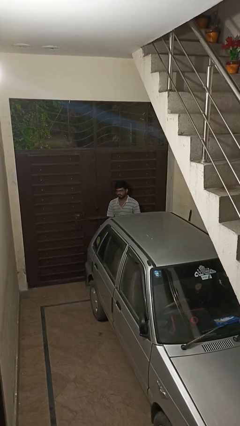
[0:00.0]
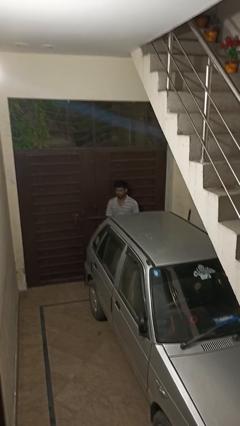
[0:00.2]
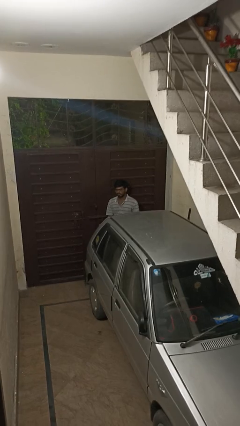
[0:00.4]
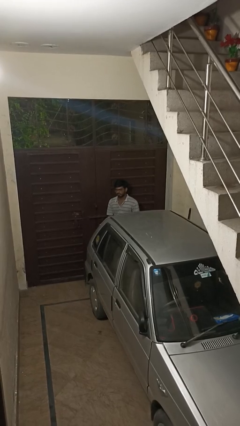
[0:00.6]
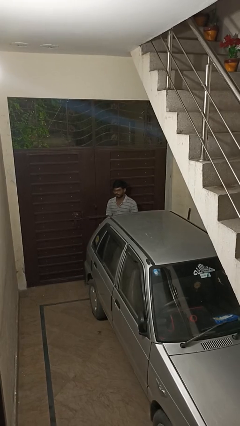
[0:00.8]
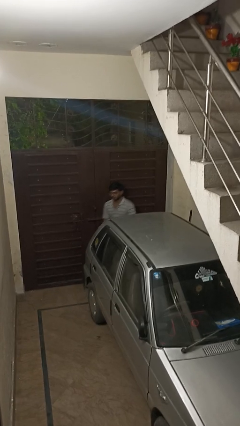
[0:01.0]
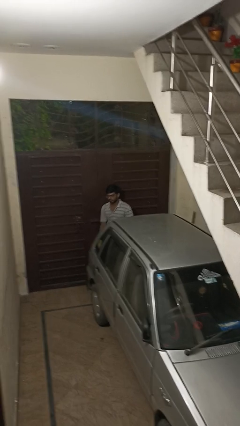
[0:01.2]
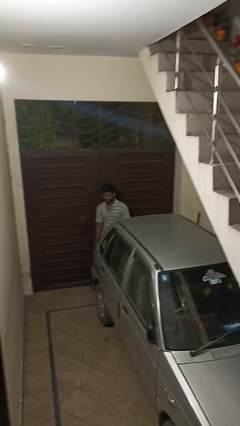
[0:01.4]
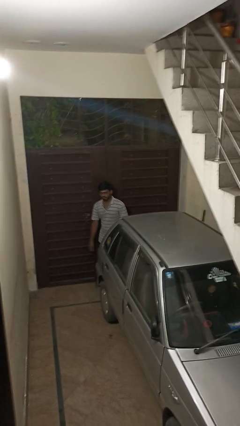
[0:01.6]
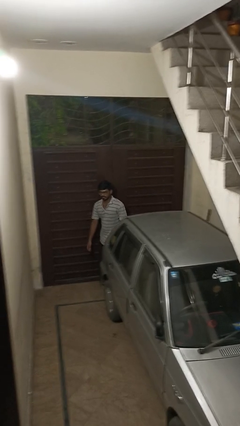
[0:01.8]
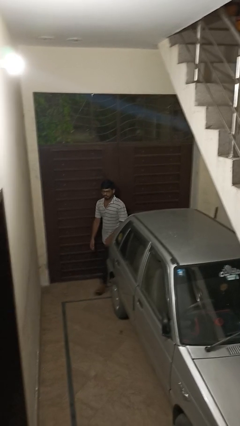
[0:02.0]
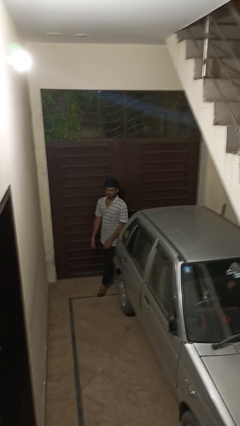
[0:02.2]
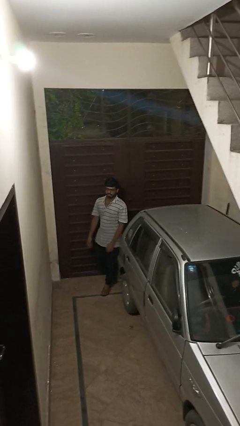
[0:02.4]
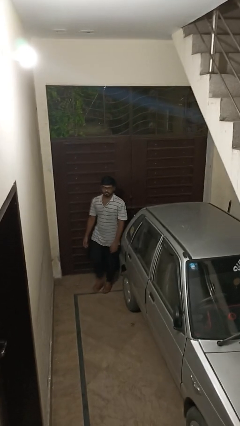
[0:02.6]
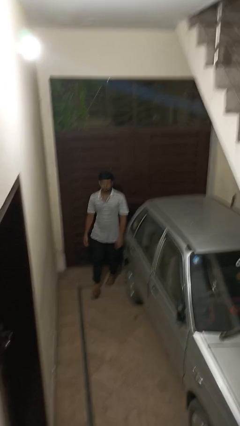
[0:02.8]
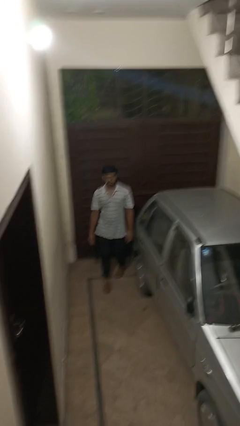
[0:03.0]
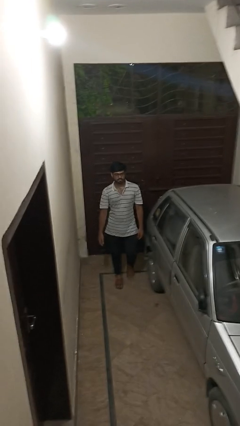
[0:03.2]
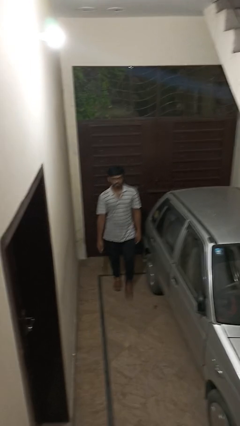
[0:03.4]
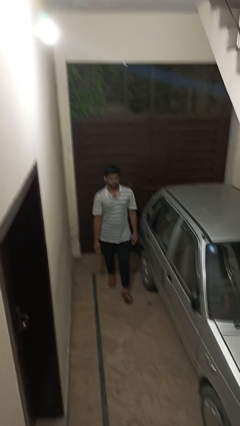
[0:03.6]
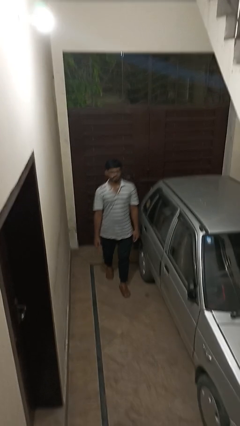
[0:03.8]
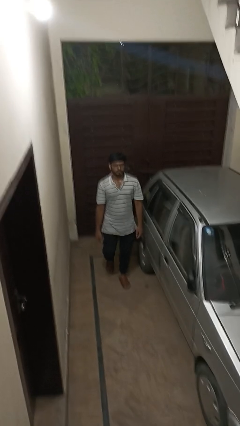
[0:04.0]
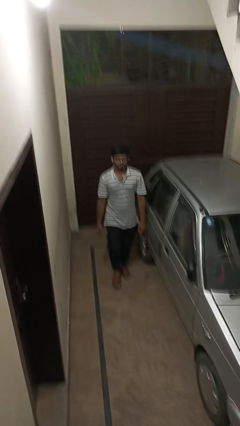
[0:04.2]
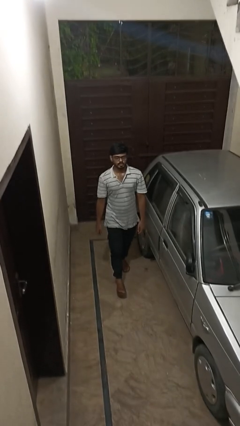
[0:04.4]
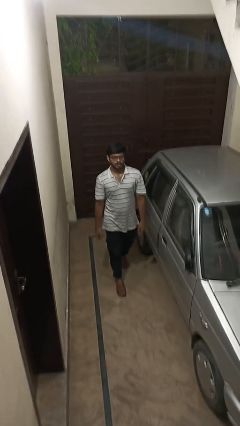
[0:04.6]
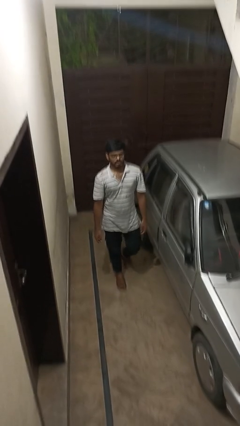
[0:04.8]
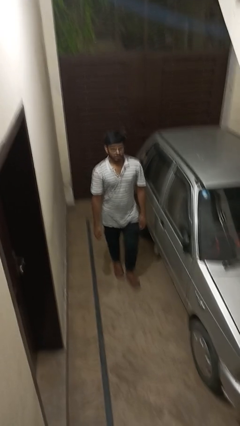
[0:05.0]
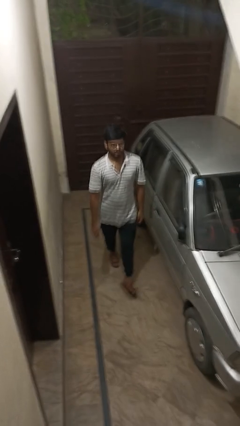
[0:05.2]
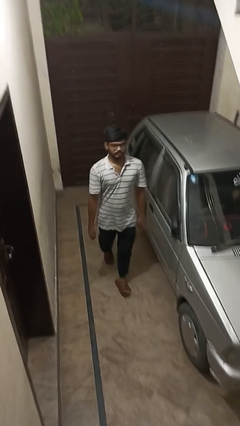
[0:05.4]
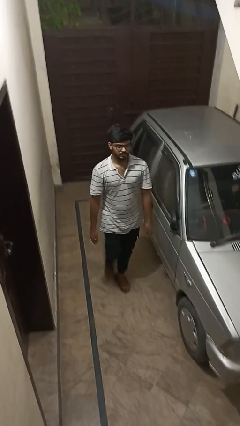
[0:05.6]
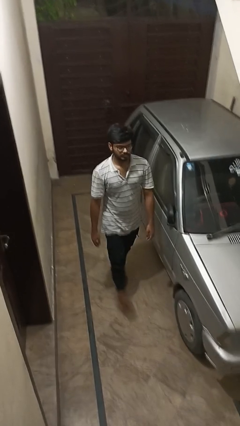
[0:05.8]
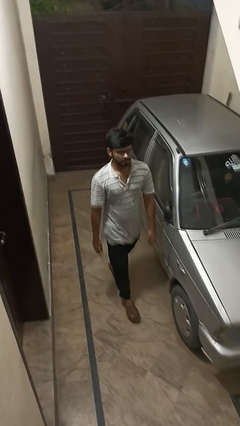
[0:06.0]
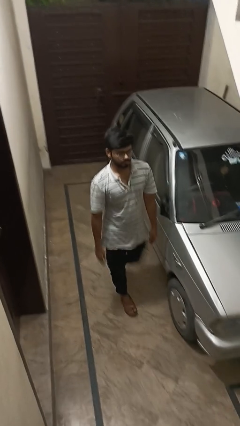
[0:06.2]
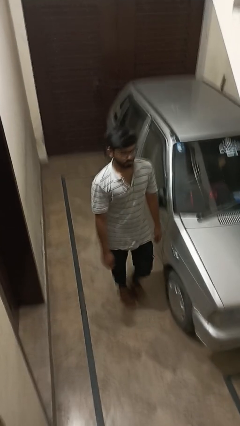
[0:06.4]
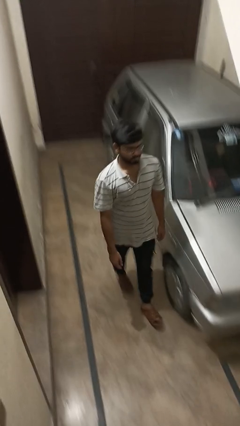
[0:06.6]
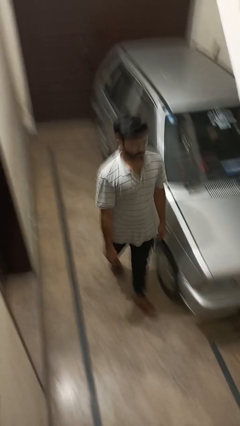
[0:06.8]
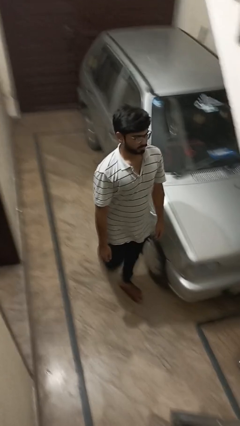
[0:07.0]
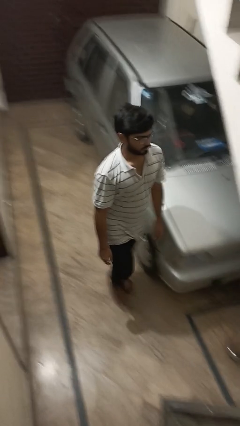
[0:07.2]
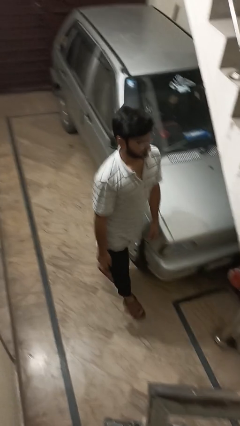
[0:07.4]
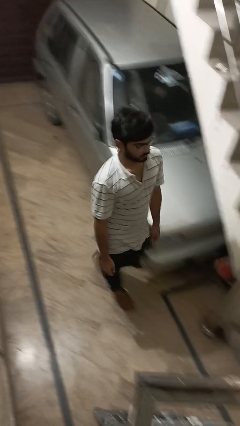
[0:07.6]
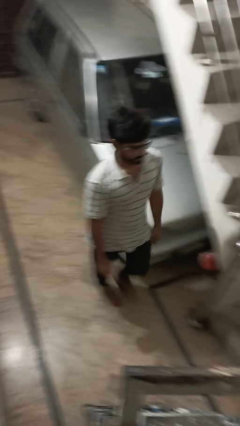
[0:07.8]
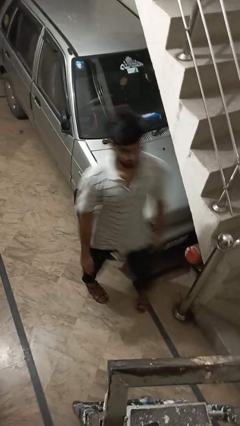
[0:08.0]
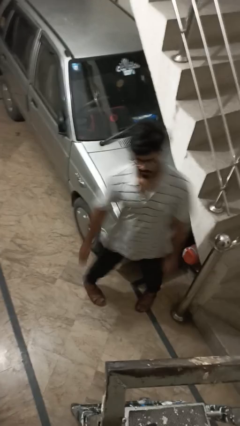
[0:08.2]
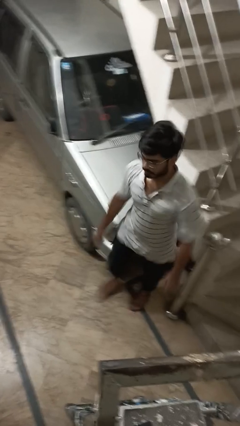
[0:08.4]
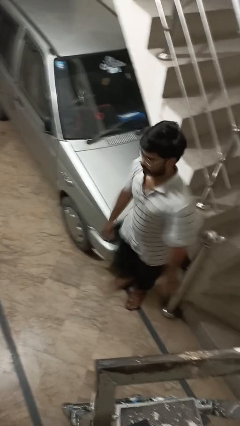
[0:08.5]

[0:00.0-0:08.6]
person walks around car

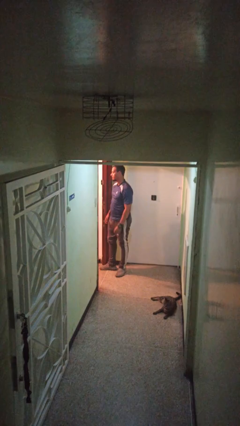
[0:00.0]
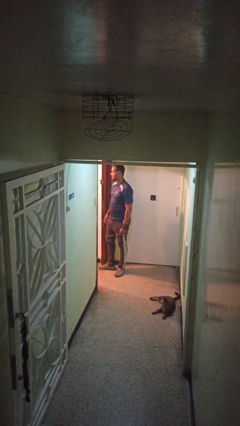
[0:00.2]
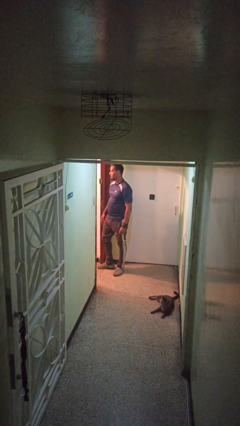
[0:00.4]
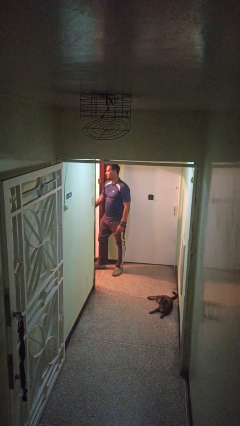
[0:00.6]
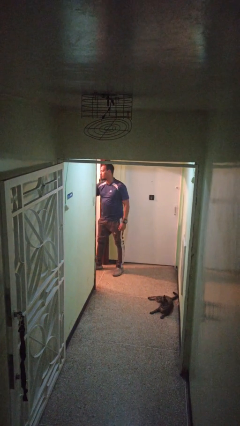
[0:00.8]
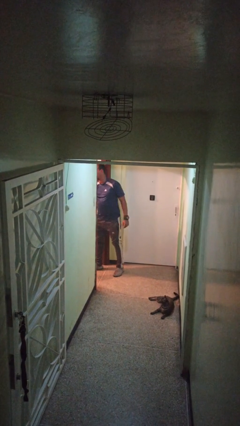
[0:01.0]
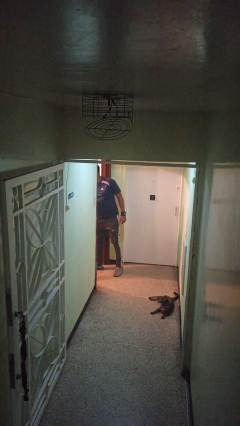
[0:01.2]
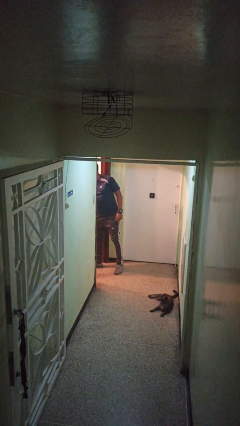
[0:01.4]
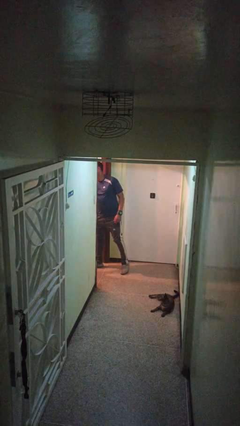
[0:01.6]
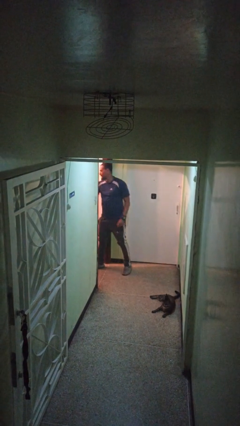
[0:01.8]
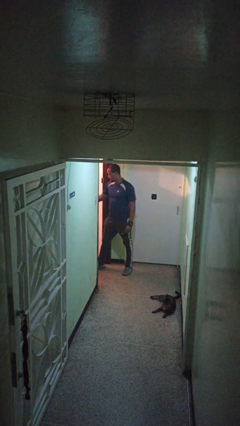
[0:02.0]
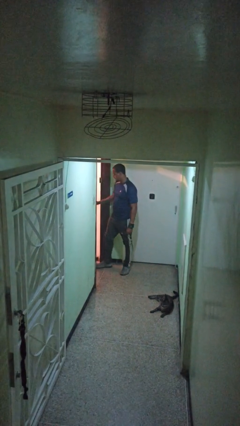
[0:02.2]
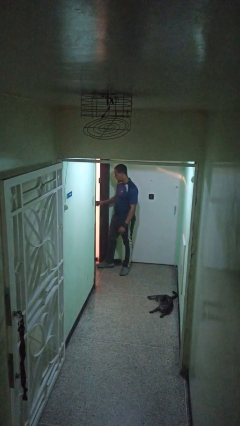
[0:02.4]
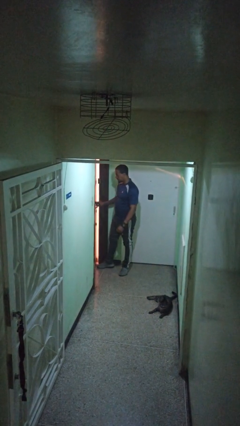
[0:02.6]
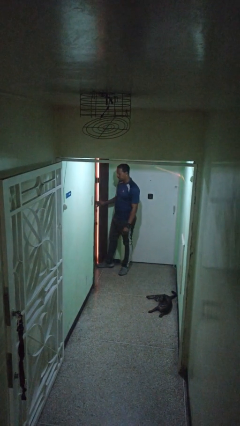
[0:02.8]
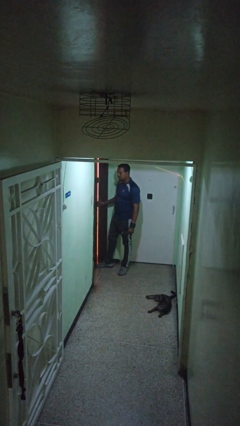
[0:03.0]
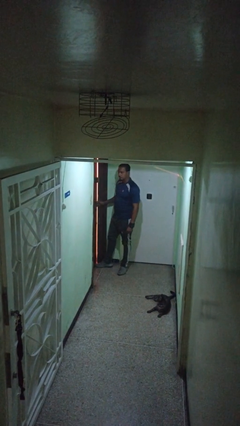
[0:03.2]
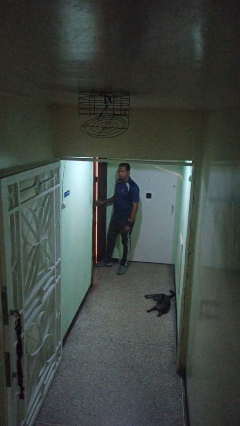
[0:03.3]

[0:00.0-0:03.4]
person closes facility door

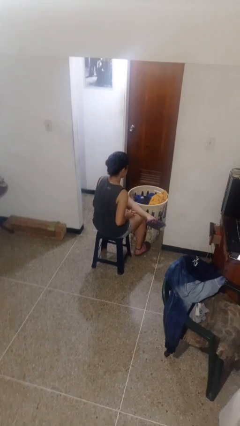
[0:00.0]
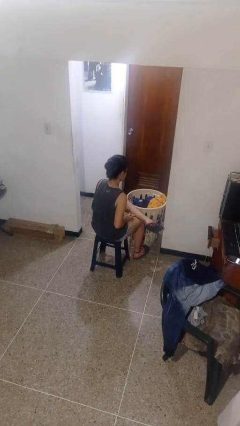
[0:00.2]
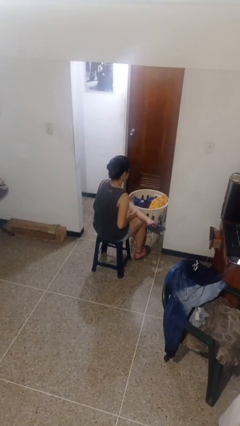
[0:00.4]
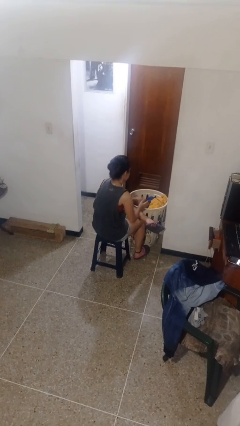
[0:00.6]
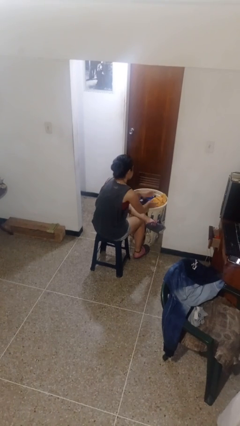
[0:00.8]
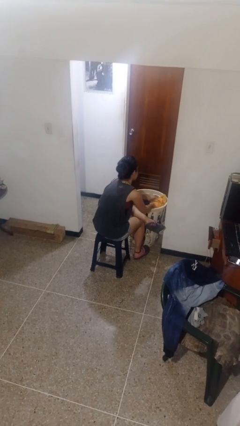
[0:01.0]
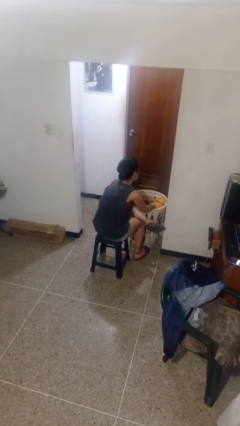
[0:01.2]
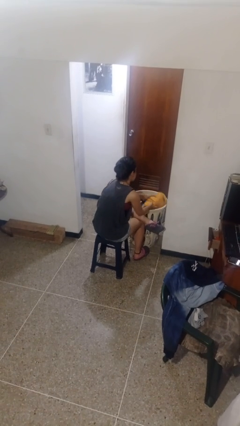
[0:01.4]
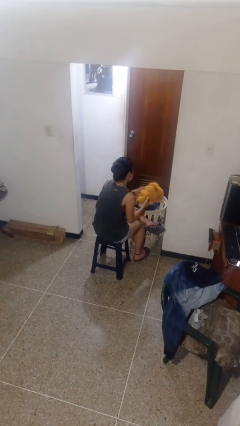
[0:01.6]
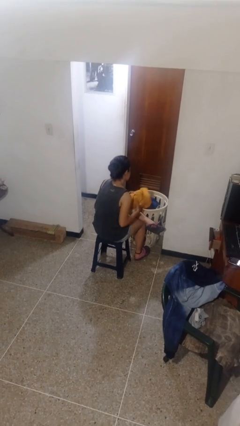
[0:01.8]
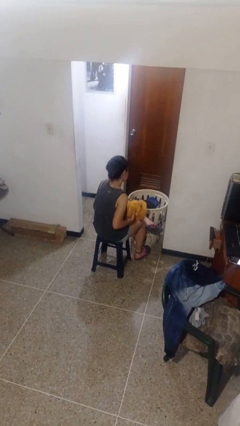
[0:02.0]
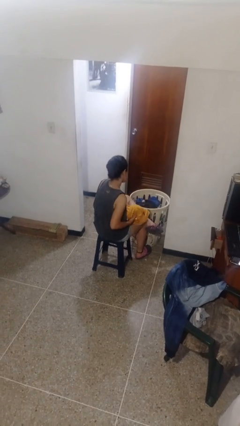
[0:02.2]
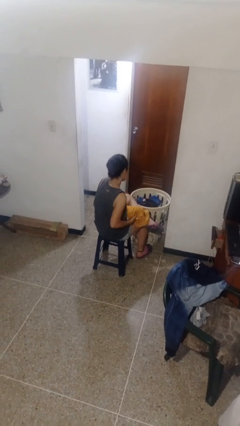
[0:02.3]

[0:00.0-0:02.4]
person takes object from basket

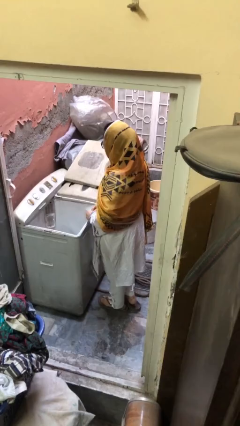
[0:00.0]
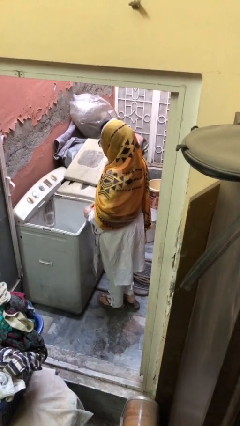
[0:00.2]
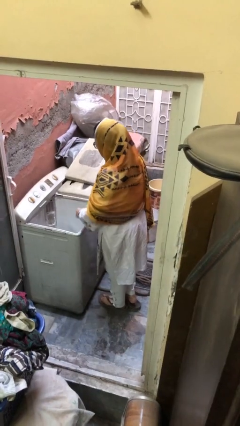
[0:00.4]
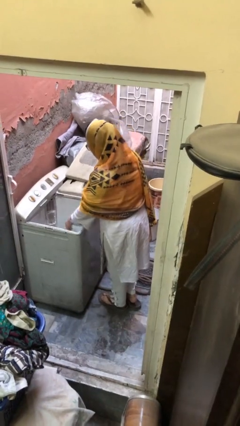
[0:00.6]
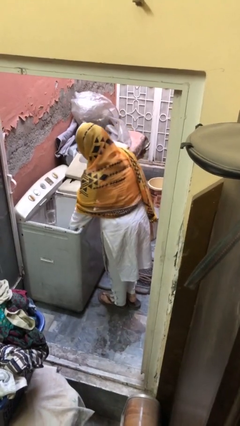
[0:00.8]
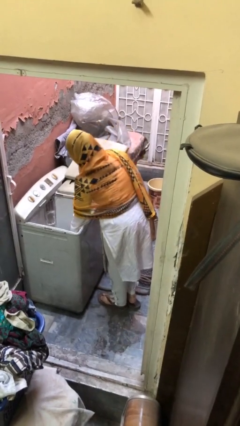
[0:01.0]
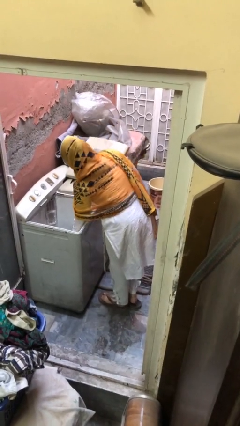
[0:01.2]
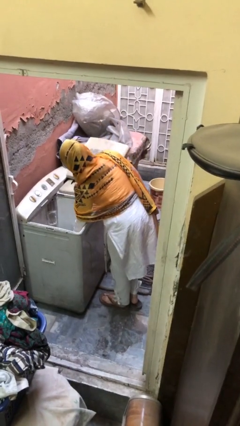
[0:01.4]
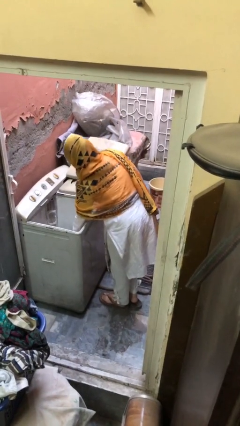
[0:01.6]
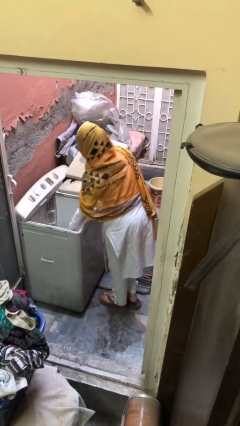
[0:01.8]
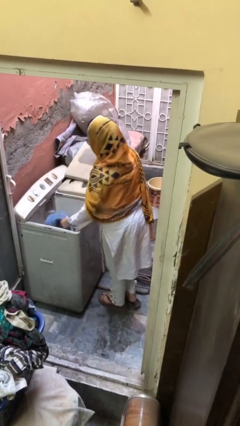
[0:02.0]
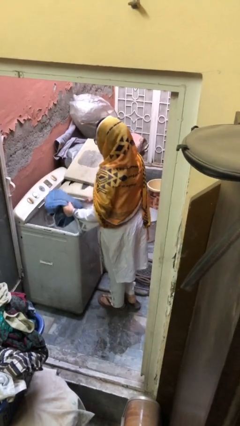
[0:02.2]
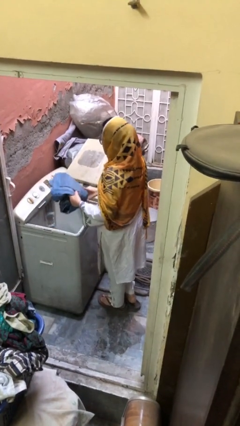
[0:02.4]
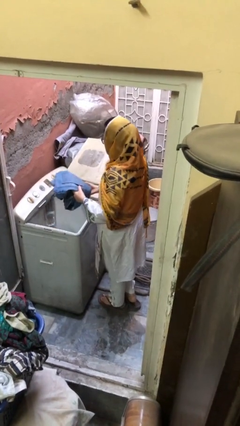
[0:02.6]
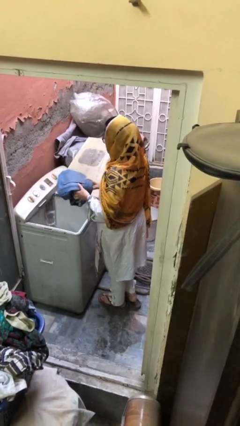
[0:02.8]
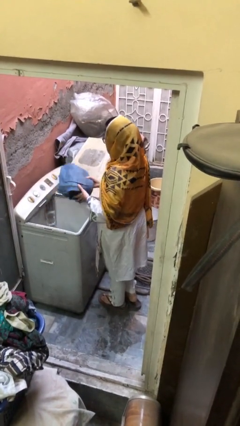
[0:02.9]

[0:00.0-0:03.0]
person unloads clotheswasher

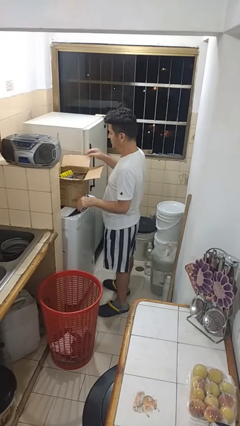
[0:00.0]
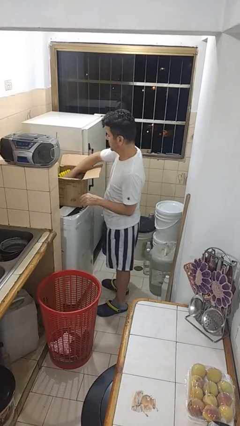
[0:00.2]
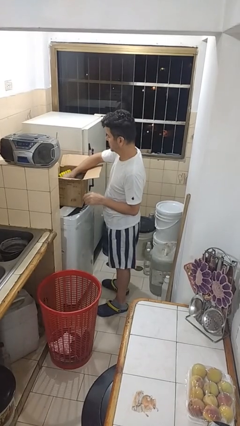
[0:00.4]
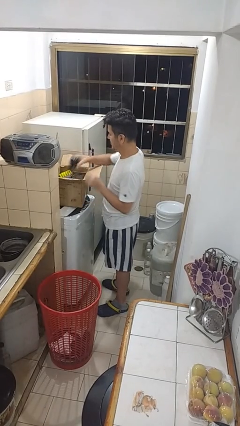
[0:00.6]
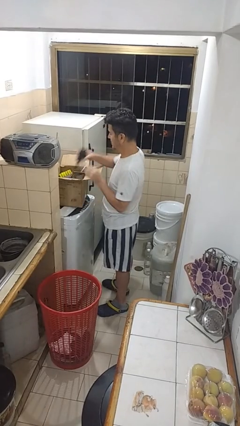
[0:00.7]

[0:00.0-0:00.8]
person takes object from box
